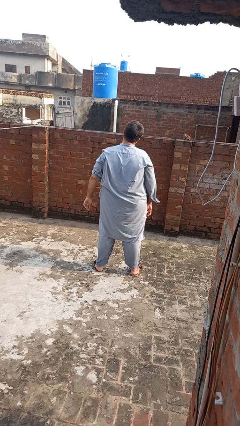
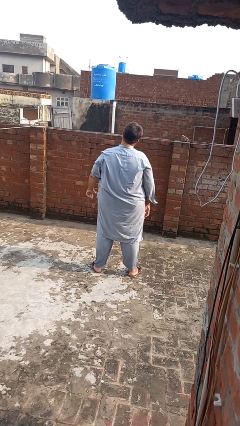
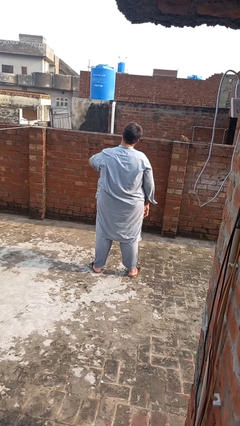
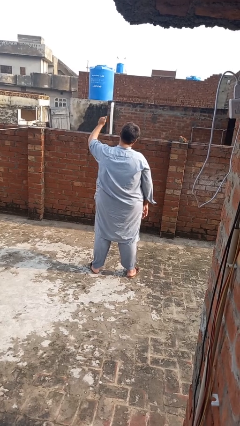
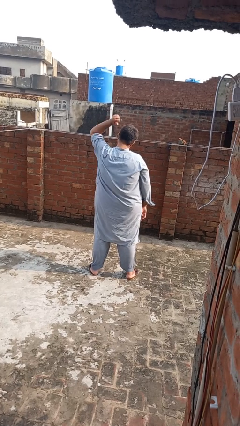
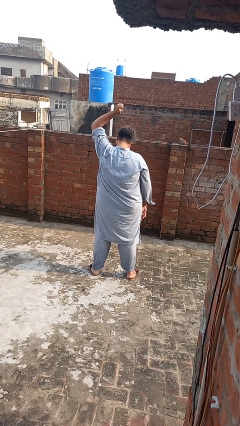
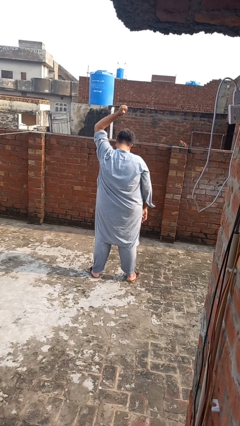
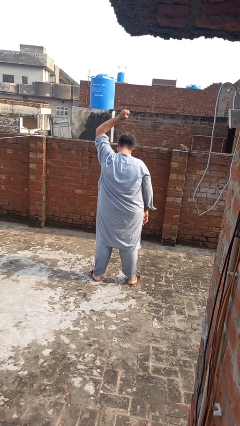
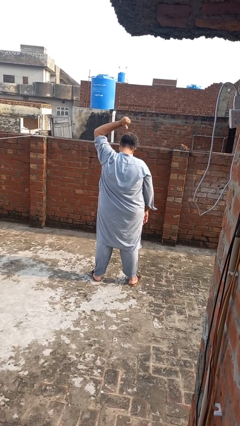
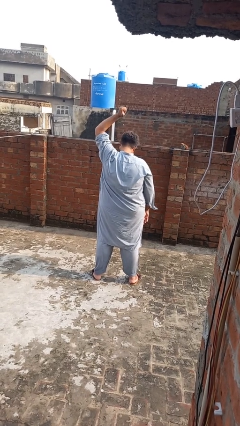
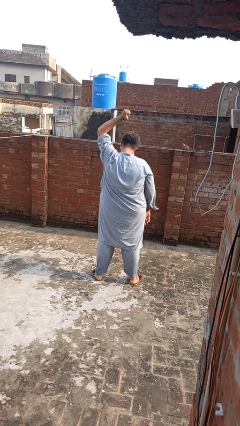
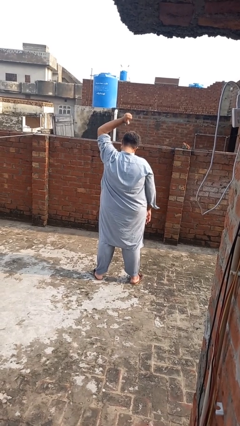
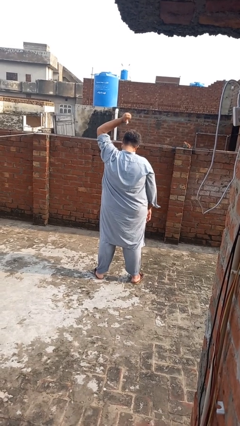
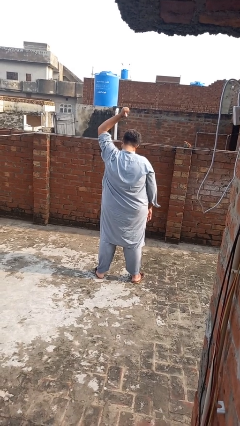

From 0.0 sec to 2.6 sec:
person gestures behind me

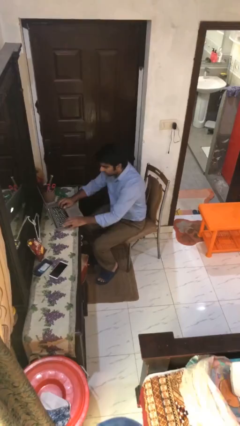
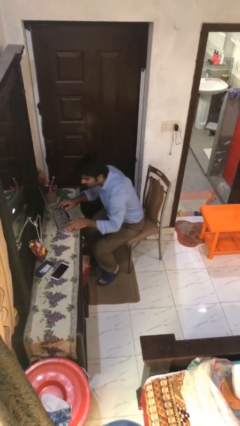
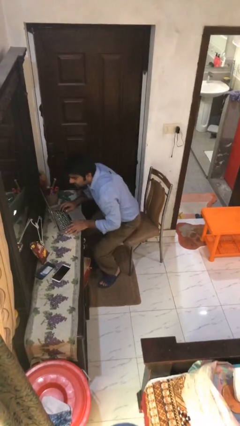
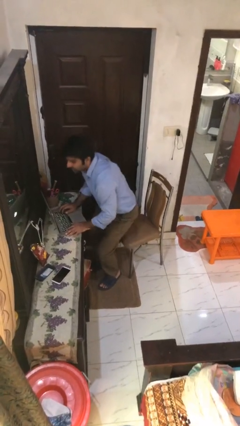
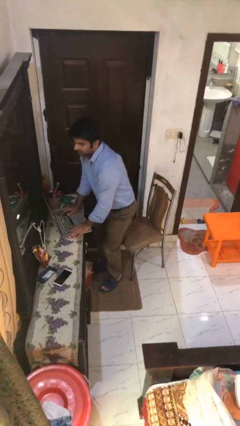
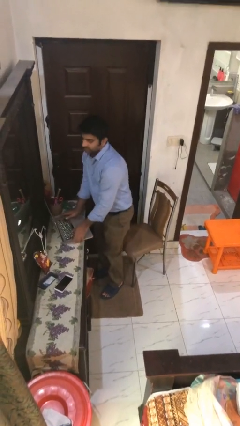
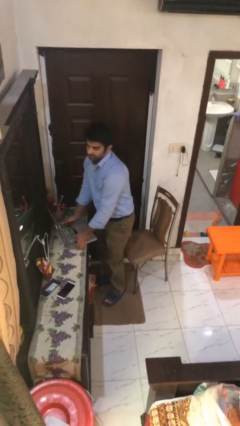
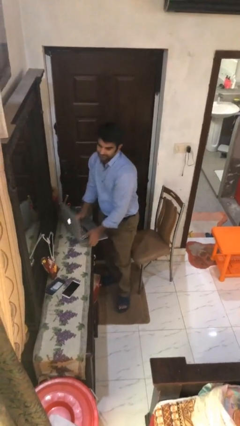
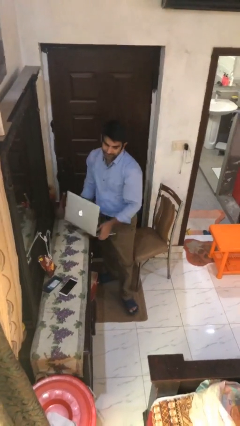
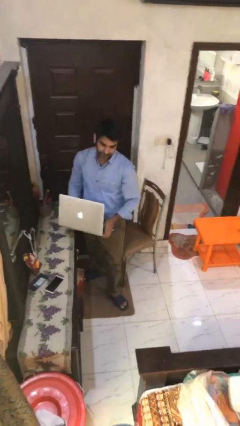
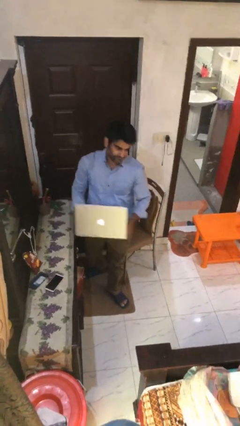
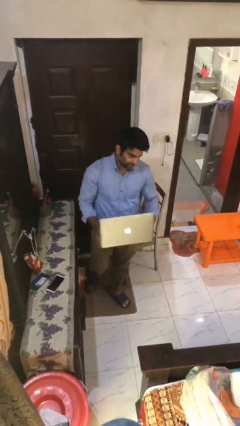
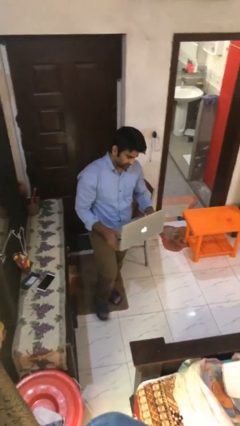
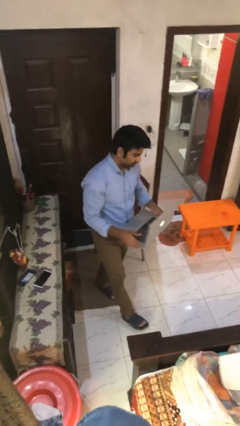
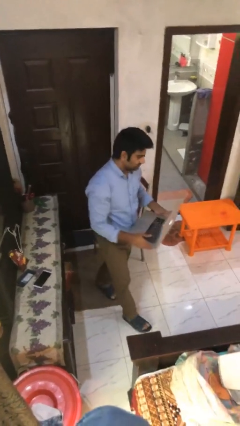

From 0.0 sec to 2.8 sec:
person stands up

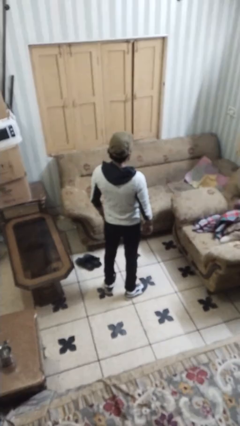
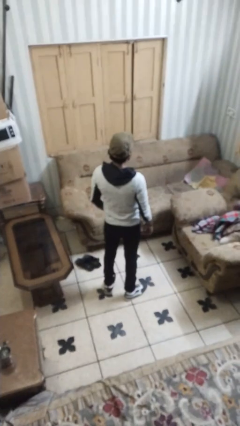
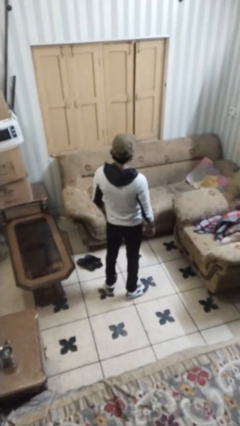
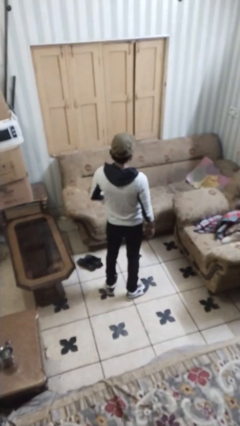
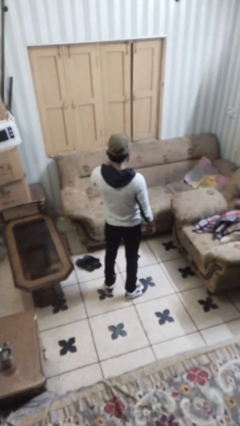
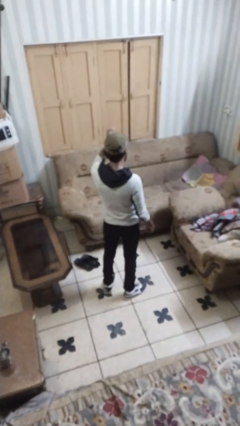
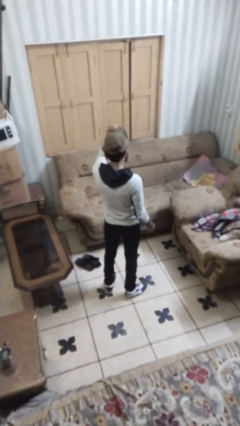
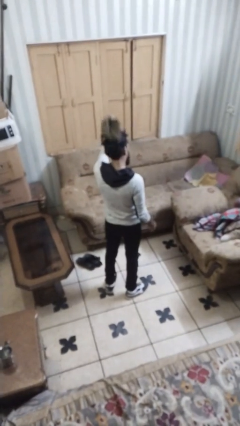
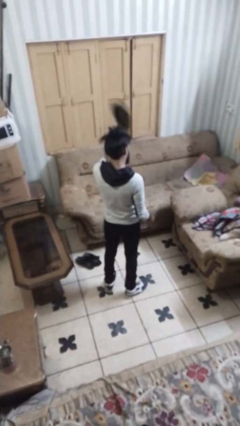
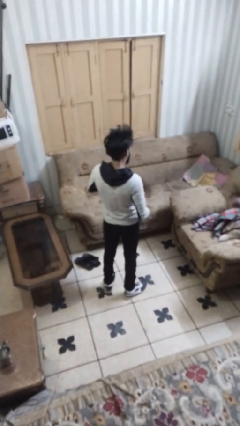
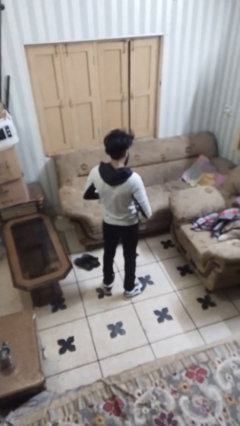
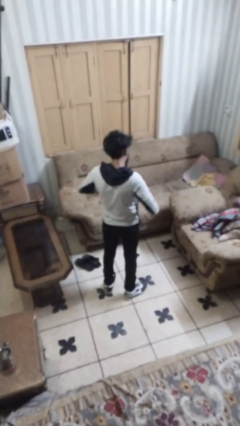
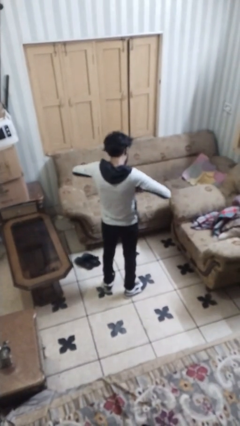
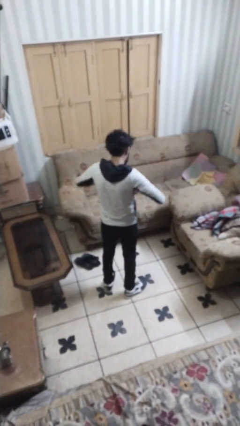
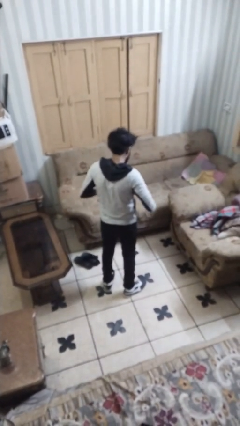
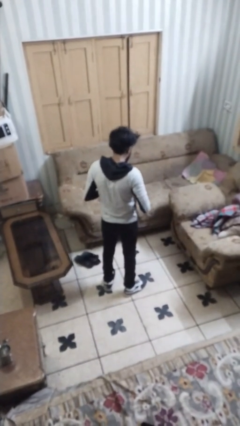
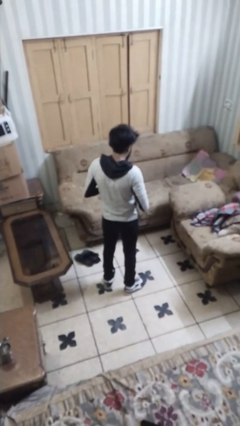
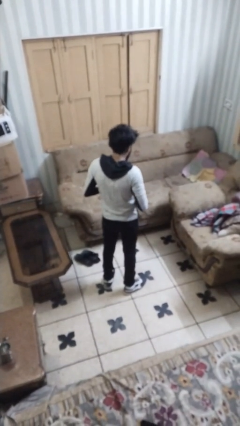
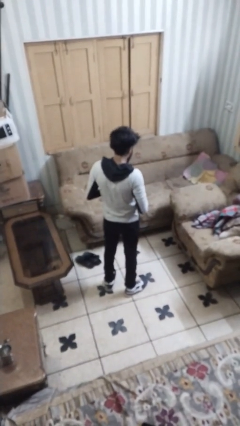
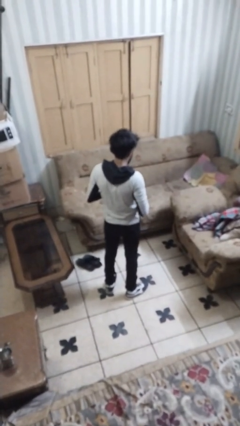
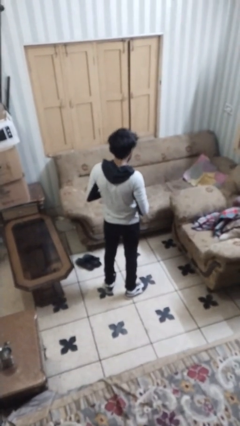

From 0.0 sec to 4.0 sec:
person takes off hat

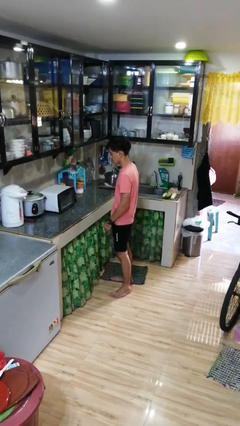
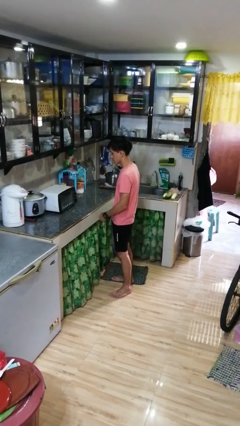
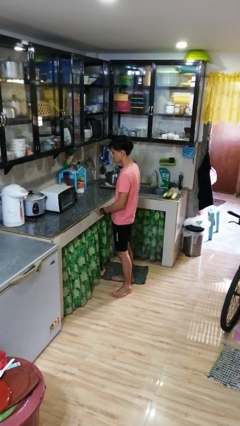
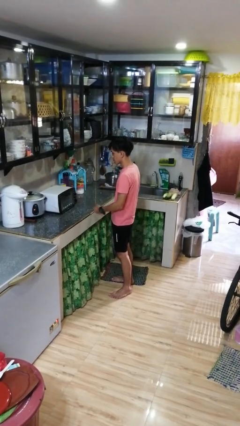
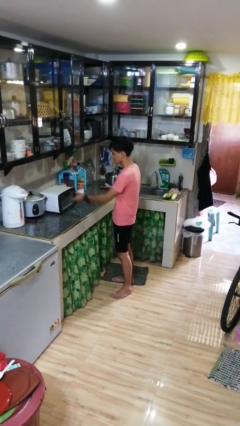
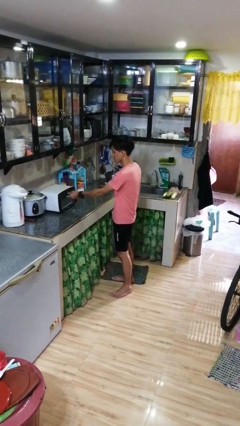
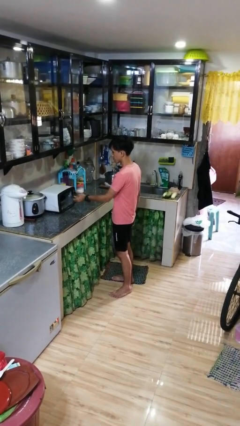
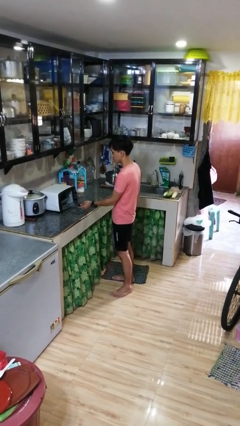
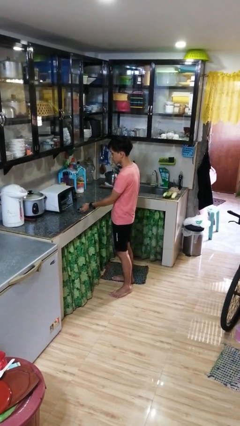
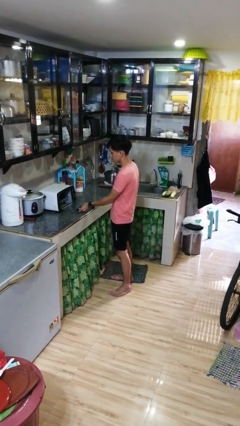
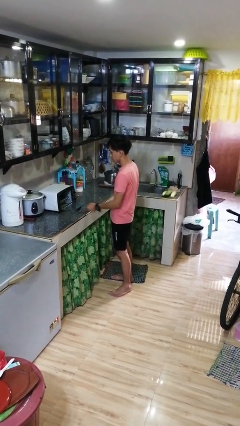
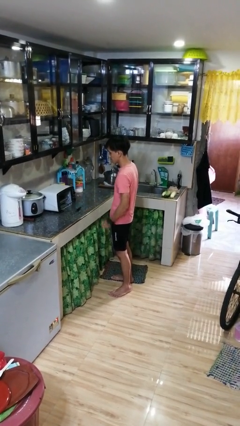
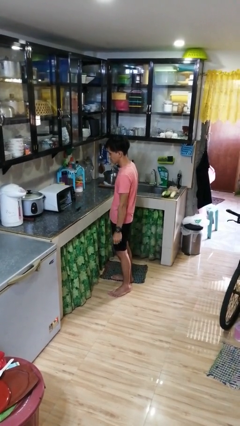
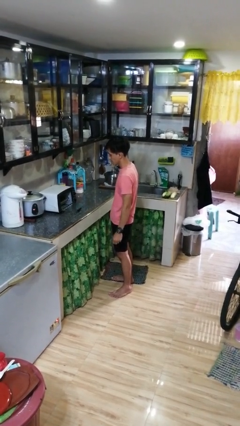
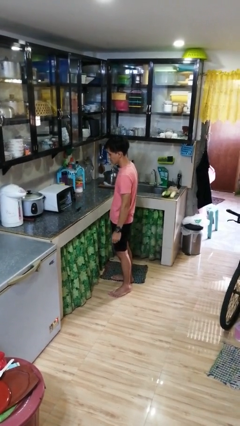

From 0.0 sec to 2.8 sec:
person opens microwave

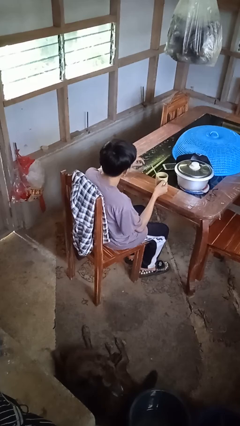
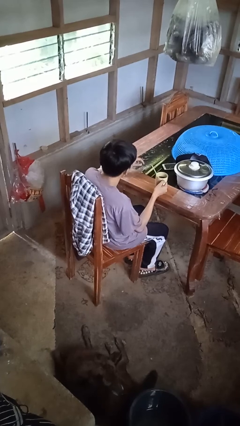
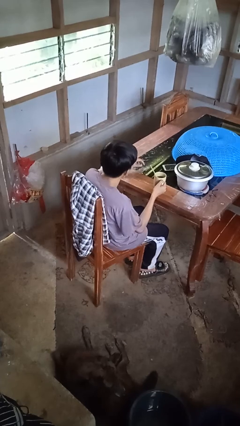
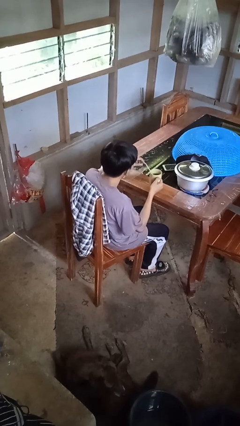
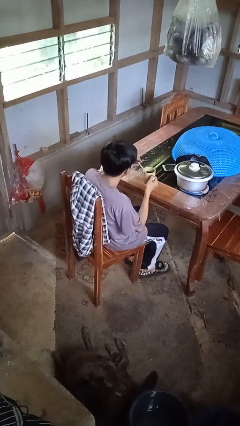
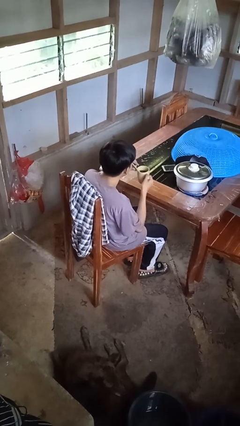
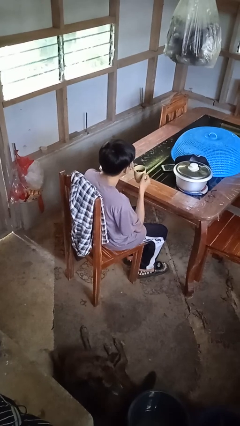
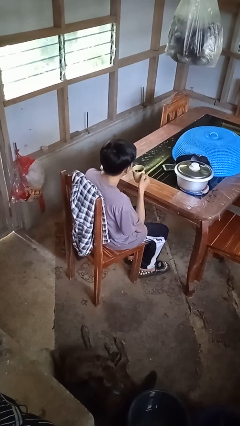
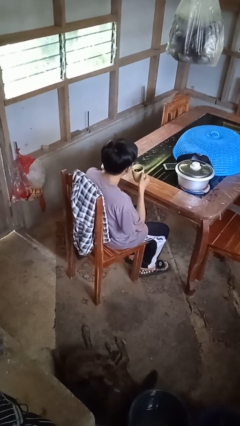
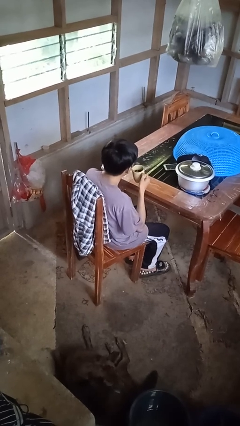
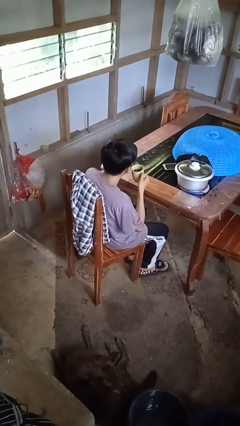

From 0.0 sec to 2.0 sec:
person drinks from straw

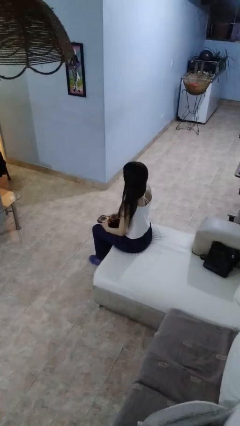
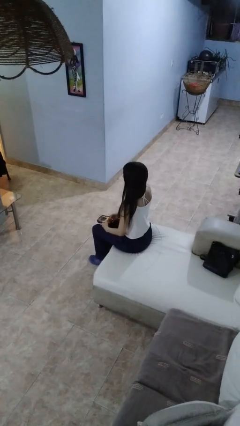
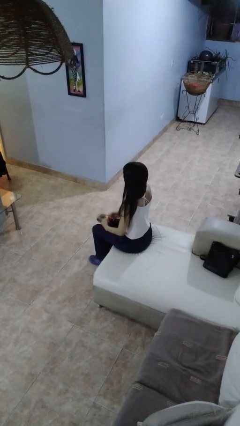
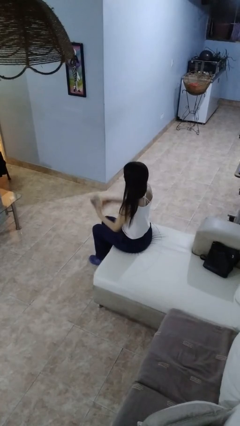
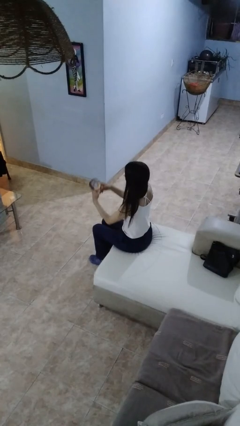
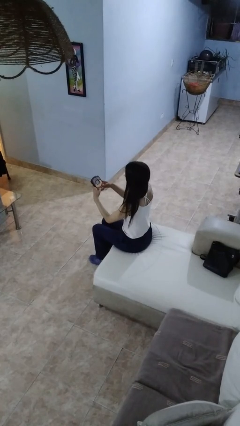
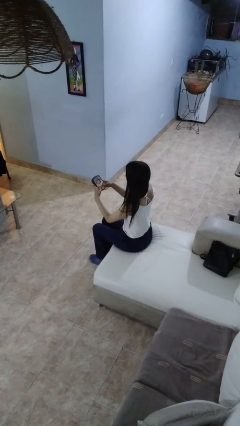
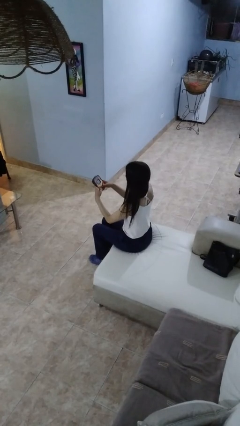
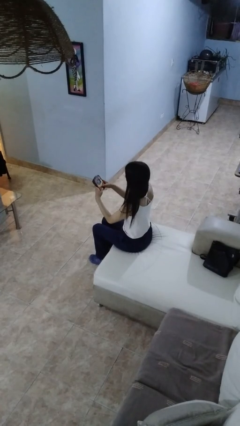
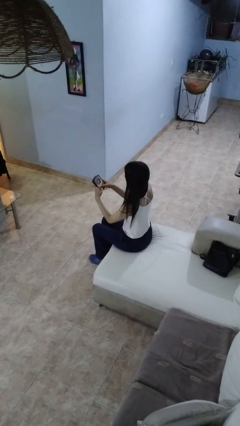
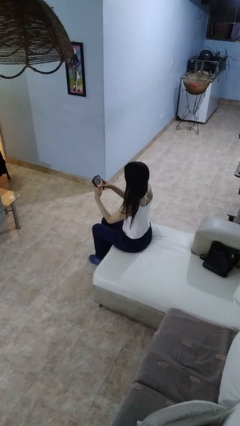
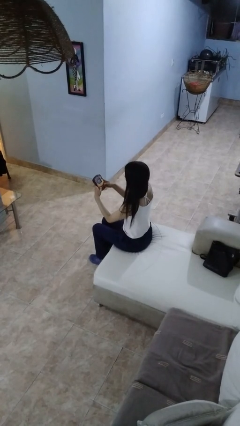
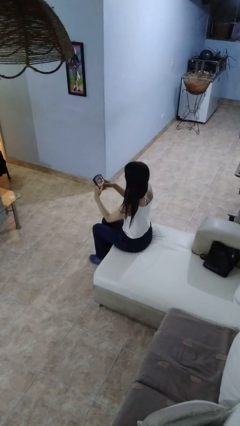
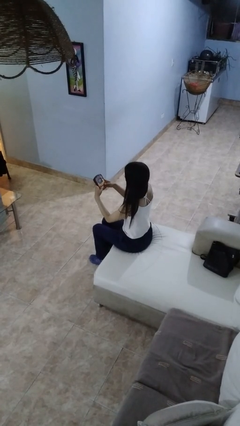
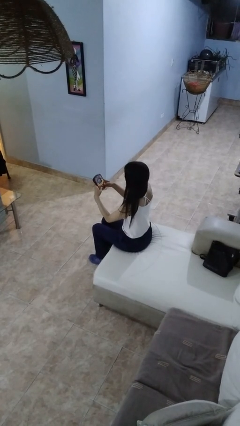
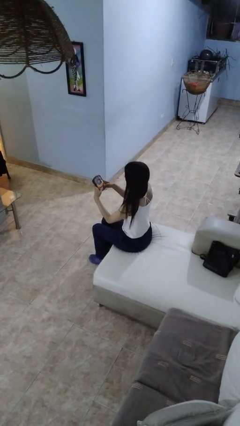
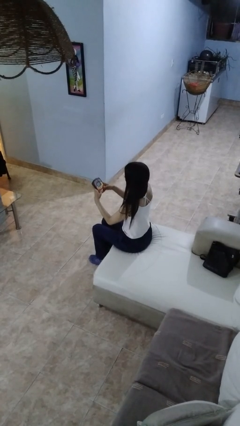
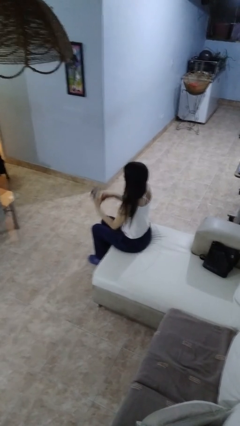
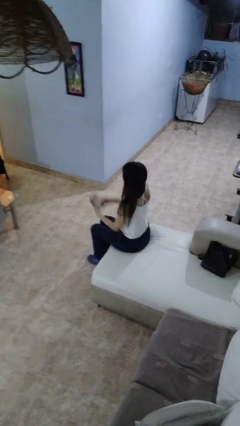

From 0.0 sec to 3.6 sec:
person interacts with handheld game
